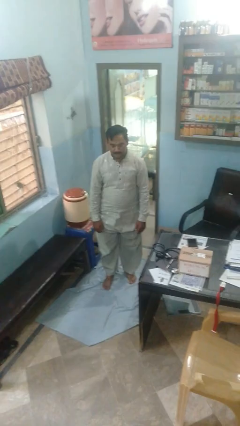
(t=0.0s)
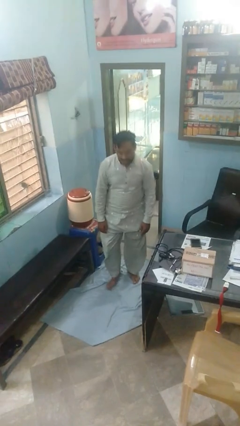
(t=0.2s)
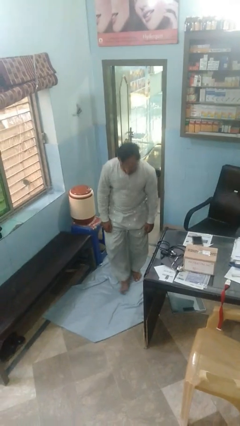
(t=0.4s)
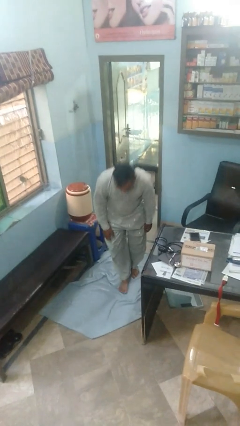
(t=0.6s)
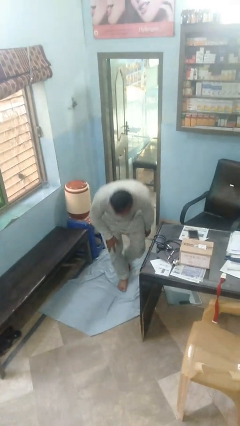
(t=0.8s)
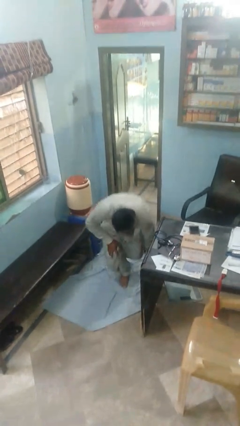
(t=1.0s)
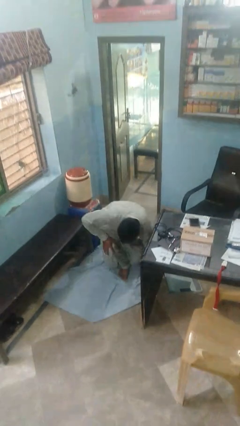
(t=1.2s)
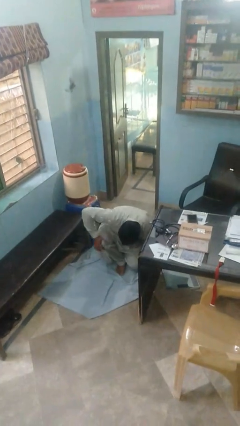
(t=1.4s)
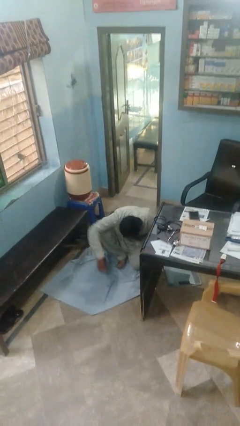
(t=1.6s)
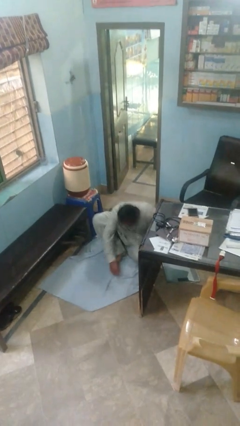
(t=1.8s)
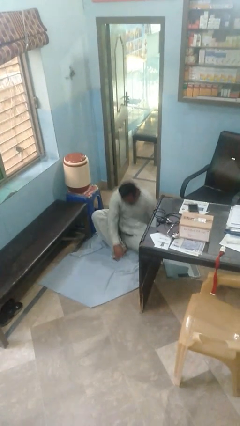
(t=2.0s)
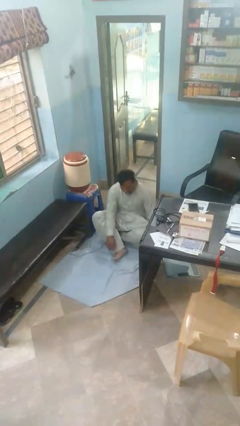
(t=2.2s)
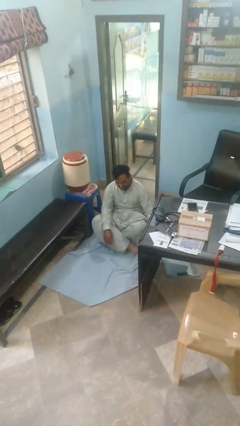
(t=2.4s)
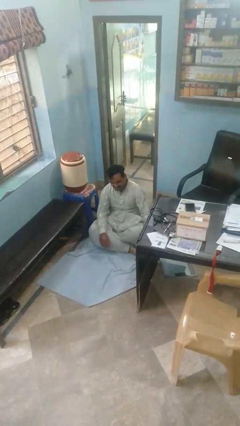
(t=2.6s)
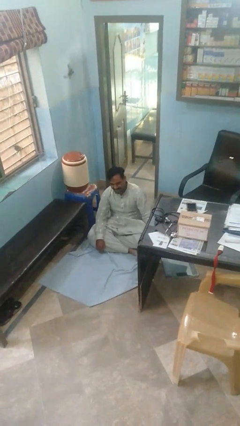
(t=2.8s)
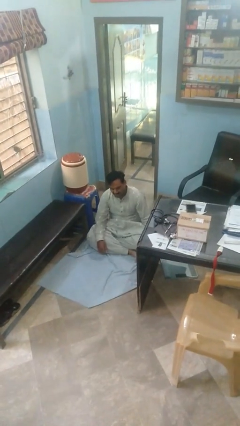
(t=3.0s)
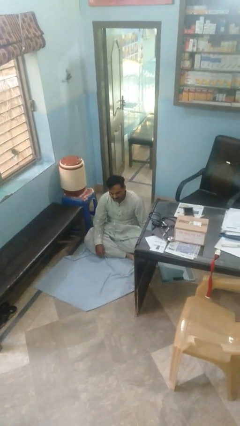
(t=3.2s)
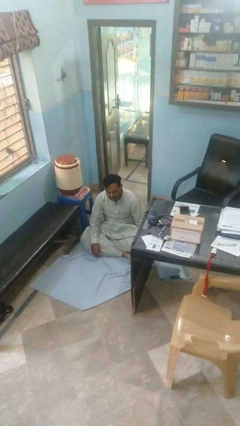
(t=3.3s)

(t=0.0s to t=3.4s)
person sits crisscross

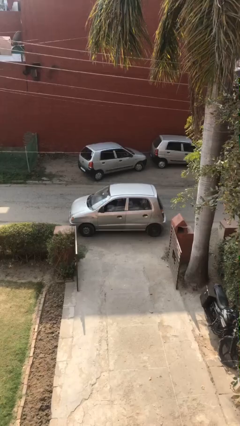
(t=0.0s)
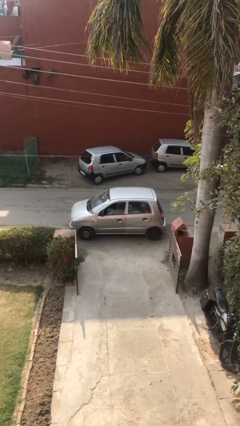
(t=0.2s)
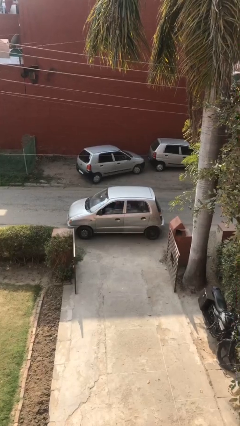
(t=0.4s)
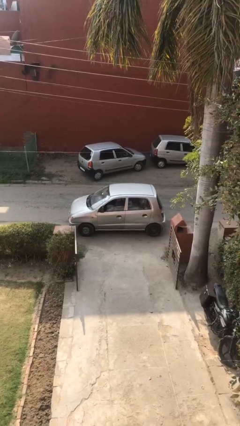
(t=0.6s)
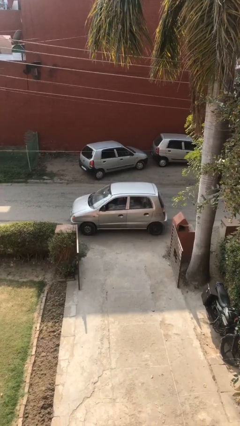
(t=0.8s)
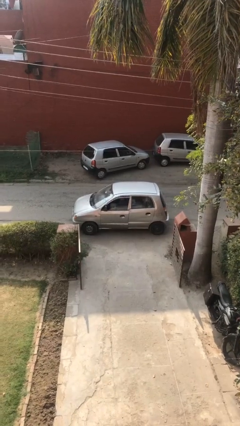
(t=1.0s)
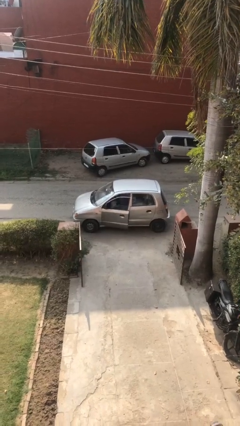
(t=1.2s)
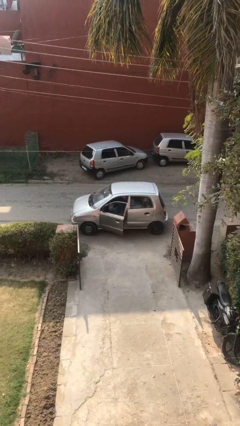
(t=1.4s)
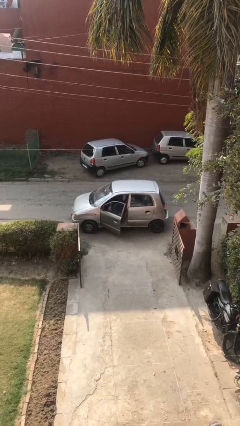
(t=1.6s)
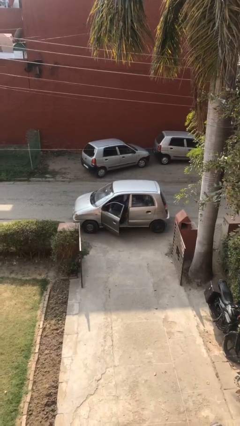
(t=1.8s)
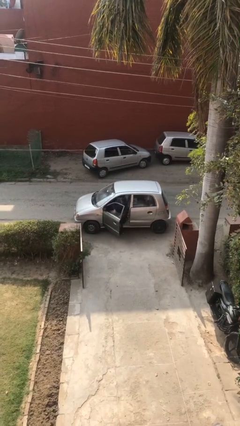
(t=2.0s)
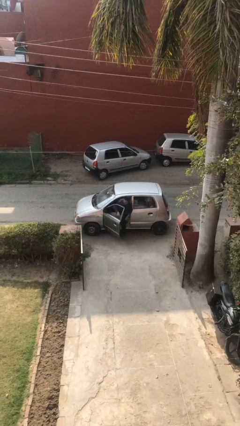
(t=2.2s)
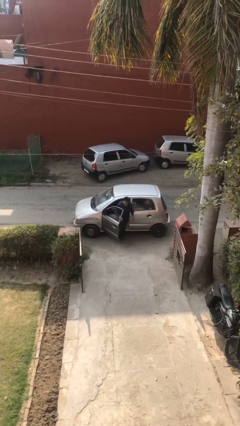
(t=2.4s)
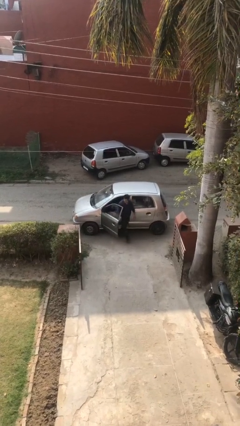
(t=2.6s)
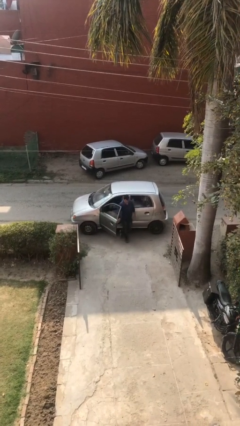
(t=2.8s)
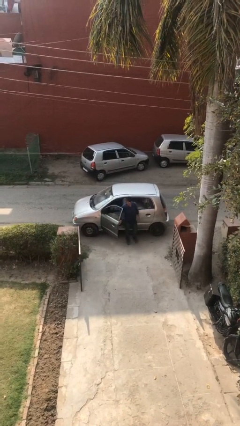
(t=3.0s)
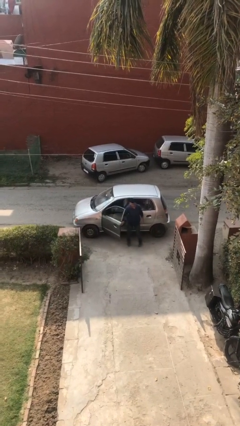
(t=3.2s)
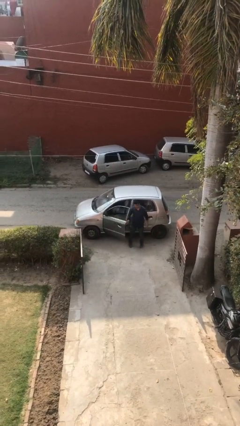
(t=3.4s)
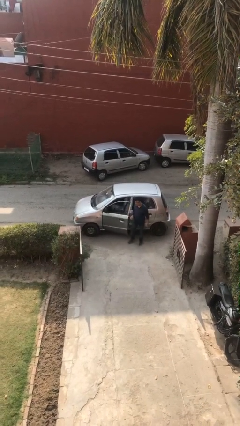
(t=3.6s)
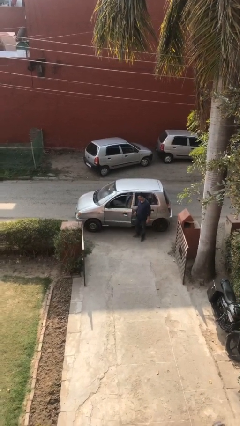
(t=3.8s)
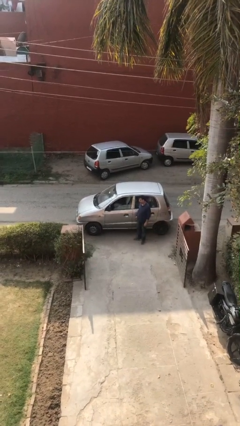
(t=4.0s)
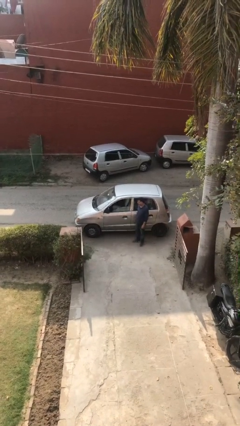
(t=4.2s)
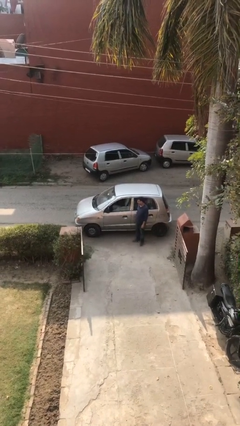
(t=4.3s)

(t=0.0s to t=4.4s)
car drops off person

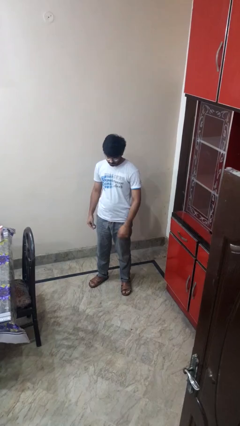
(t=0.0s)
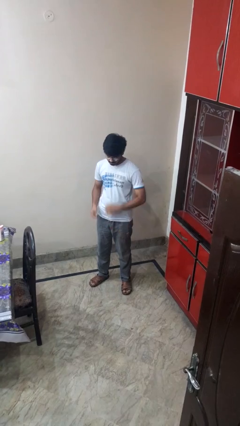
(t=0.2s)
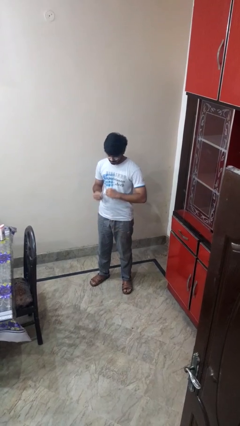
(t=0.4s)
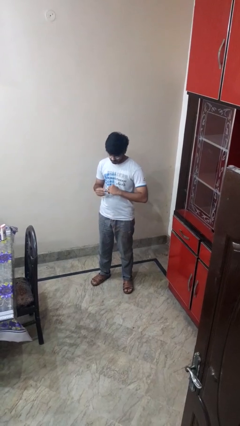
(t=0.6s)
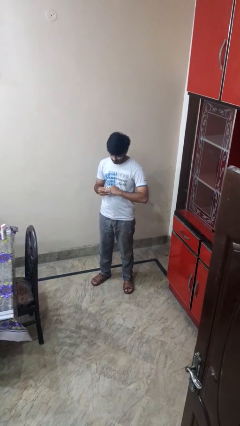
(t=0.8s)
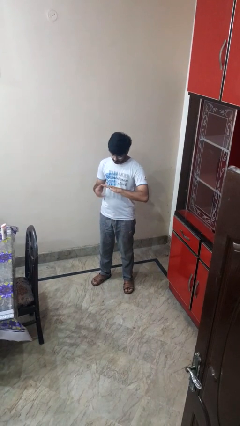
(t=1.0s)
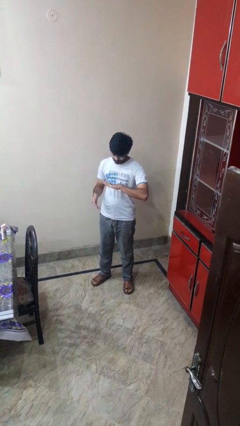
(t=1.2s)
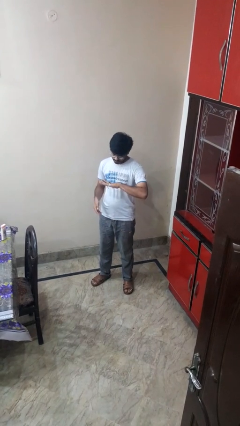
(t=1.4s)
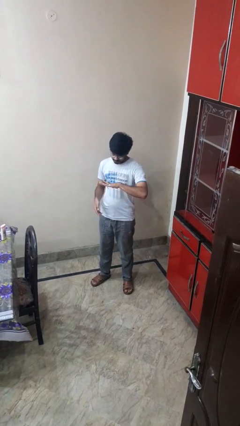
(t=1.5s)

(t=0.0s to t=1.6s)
person puts on ring

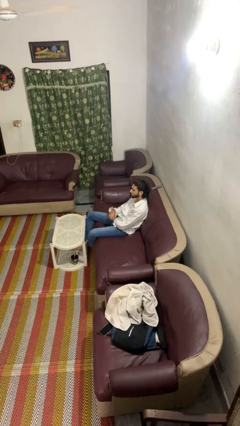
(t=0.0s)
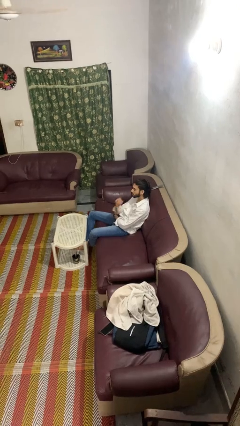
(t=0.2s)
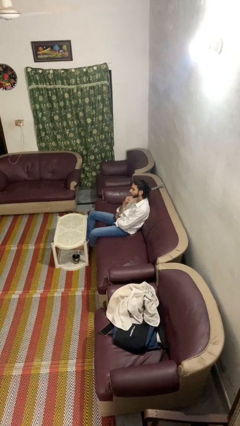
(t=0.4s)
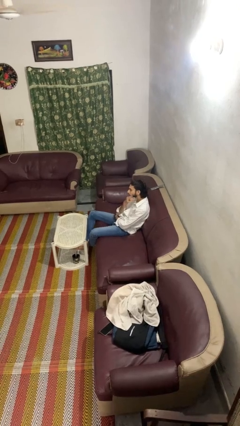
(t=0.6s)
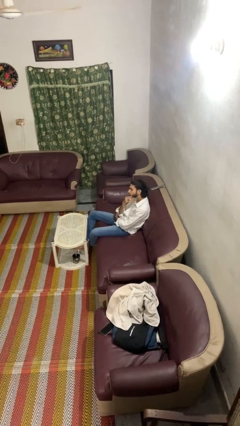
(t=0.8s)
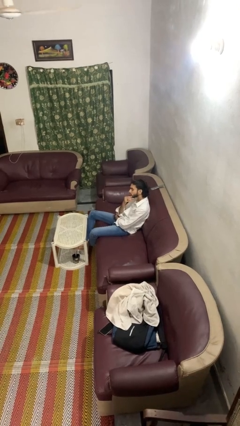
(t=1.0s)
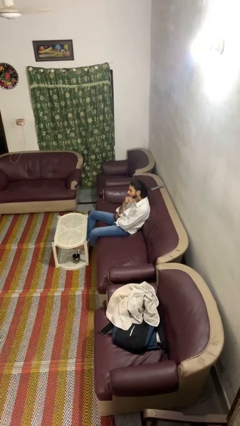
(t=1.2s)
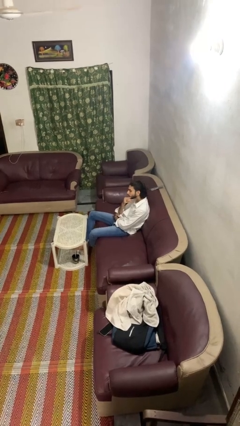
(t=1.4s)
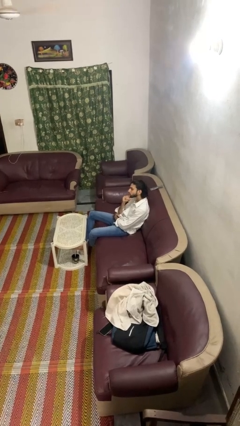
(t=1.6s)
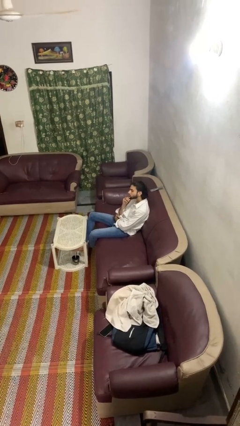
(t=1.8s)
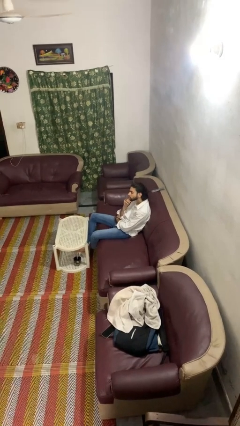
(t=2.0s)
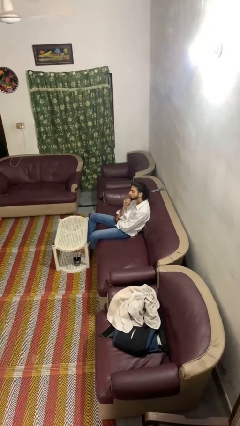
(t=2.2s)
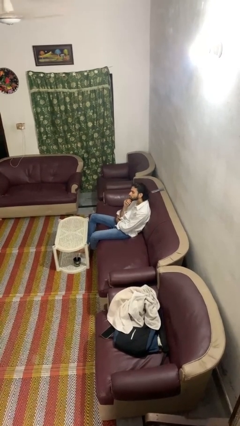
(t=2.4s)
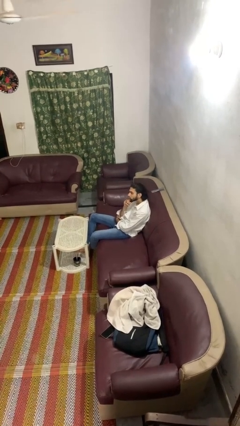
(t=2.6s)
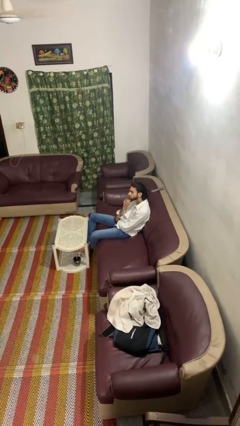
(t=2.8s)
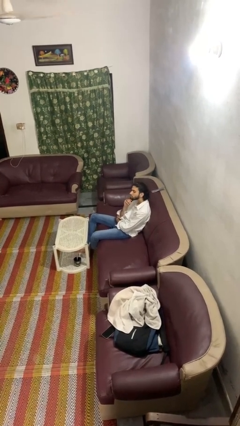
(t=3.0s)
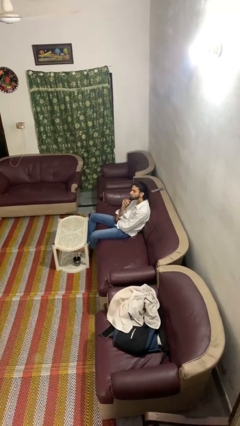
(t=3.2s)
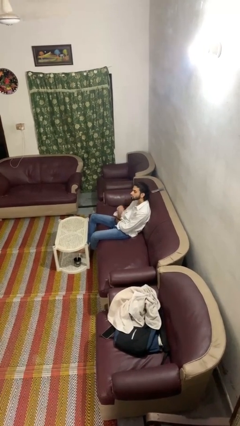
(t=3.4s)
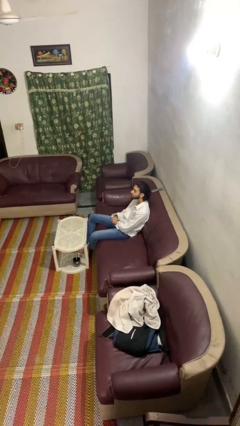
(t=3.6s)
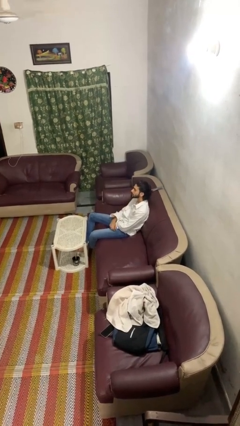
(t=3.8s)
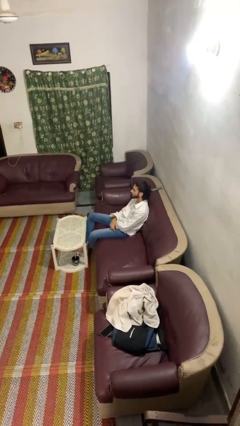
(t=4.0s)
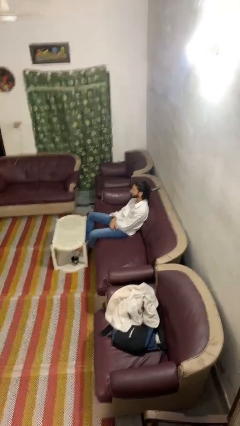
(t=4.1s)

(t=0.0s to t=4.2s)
person strokes chin

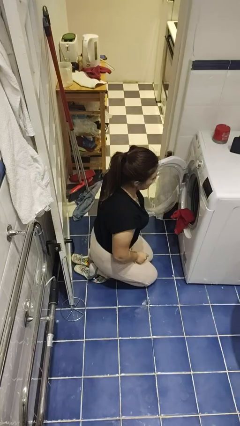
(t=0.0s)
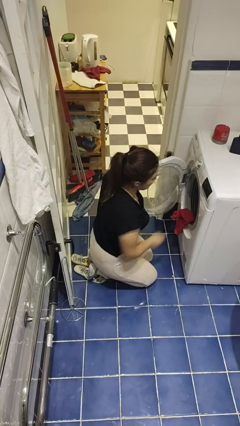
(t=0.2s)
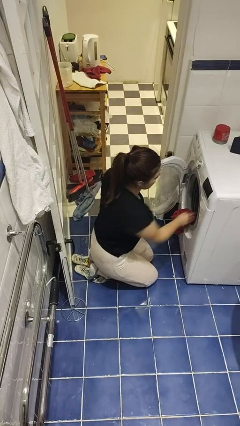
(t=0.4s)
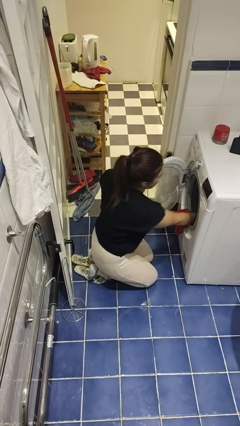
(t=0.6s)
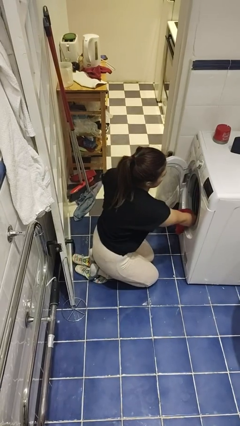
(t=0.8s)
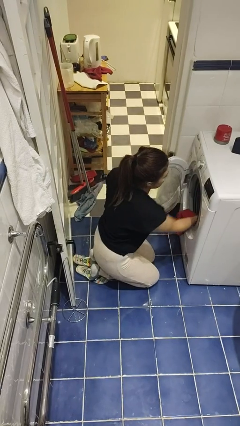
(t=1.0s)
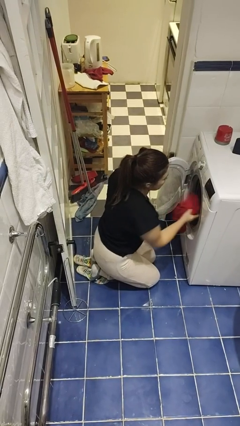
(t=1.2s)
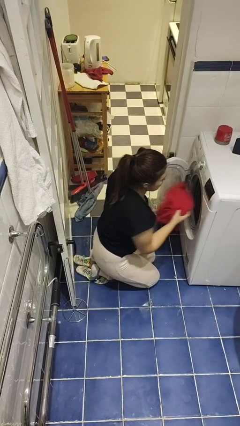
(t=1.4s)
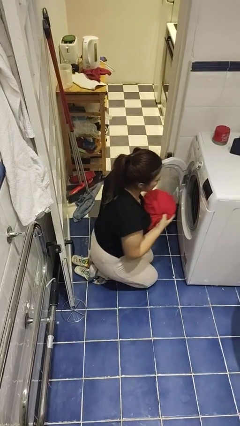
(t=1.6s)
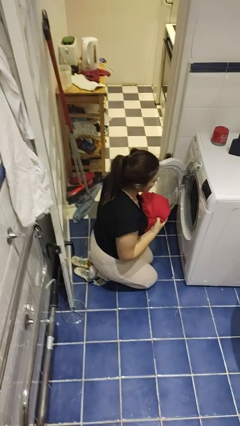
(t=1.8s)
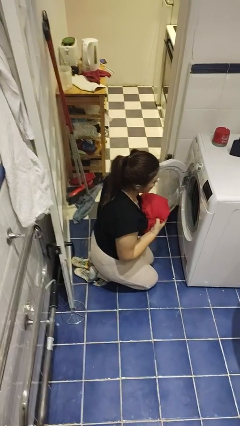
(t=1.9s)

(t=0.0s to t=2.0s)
person unloads dryer

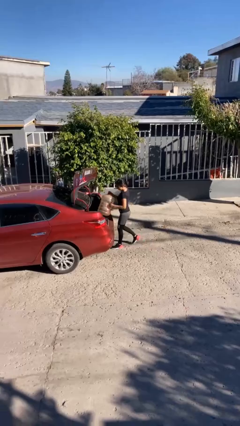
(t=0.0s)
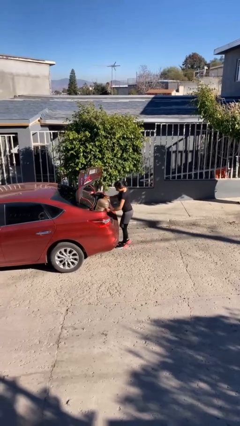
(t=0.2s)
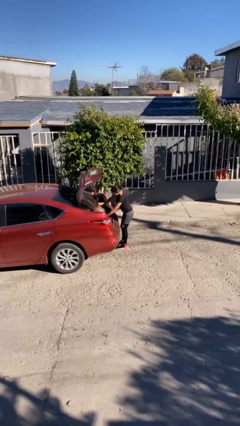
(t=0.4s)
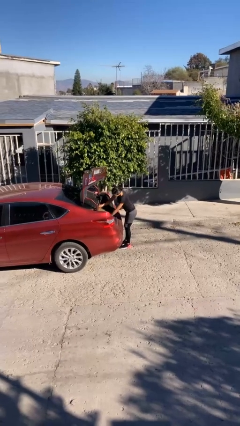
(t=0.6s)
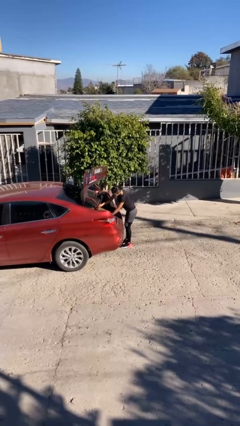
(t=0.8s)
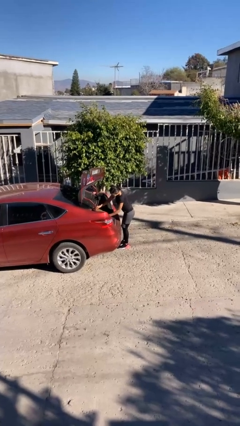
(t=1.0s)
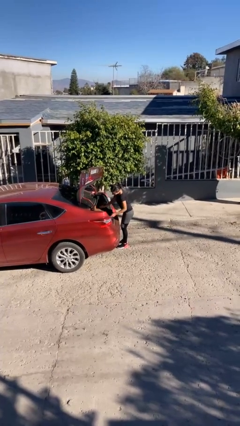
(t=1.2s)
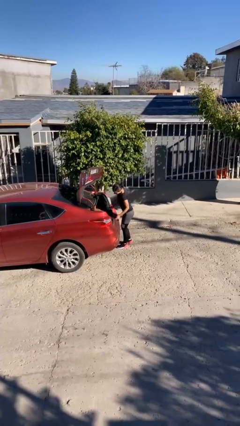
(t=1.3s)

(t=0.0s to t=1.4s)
person loads car
